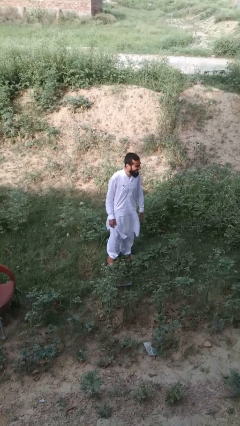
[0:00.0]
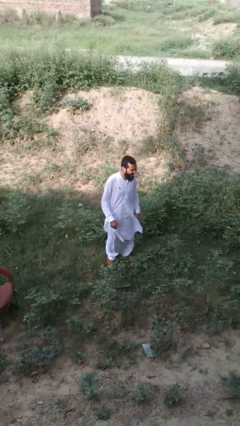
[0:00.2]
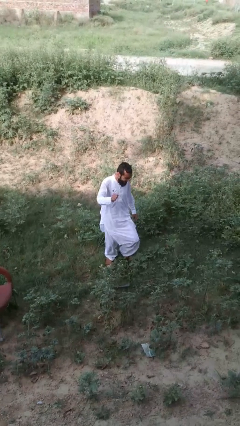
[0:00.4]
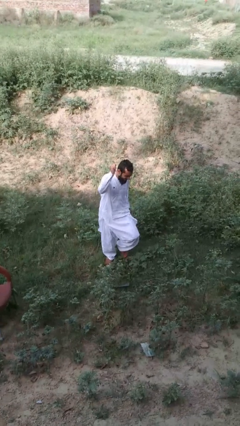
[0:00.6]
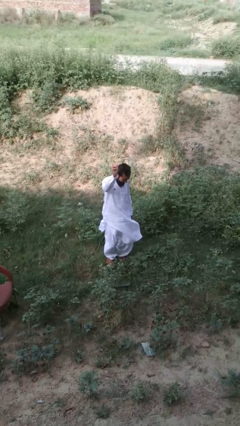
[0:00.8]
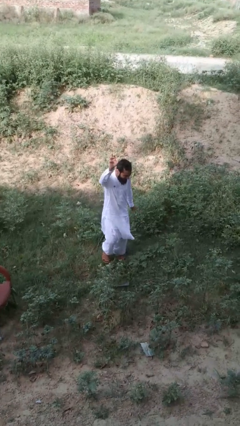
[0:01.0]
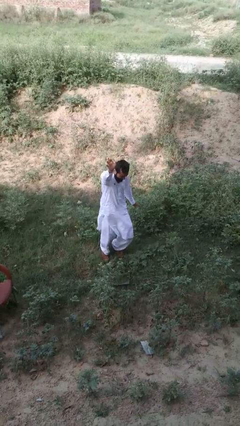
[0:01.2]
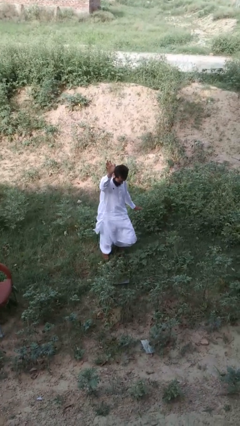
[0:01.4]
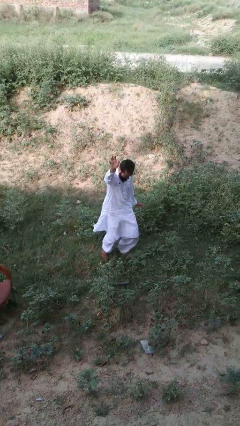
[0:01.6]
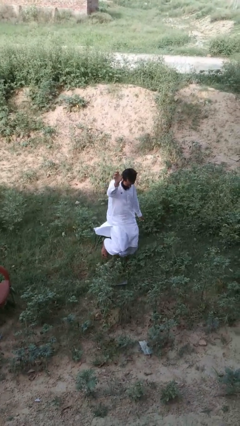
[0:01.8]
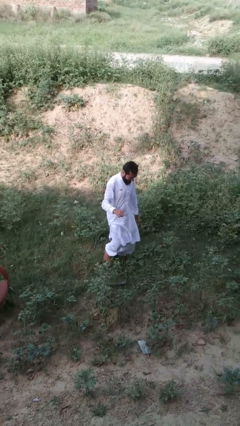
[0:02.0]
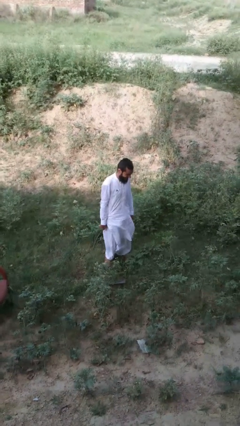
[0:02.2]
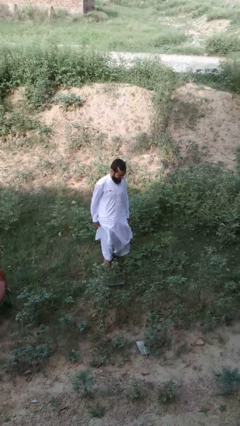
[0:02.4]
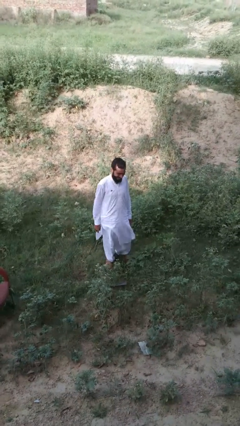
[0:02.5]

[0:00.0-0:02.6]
person dances in place

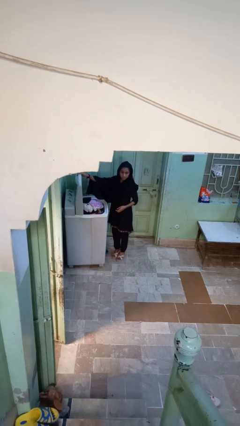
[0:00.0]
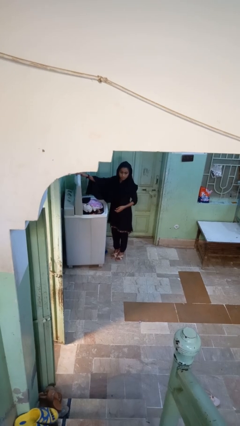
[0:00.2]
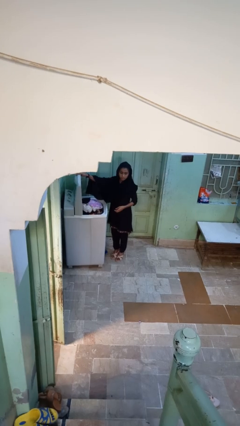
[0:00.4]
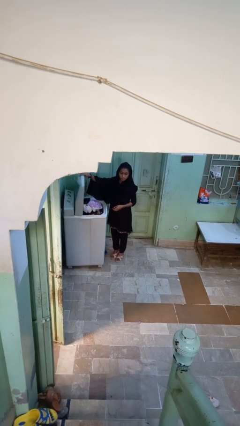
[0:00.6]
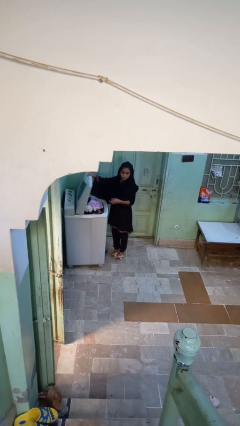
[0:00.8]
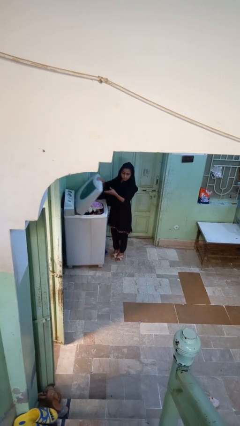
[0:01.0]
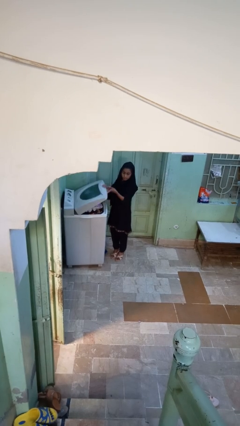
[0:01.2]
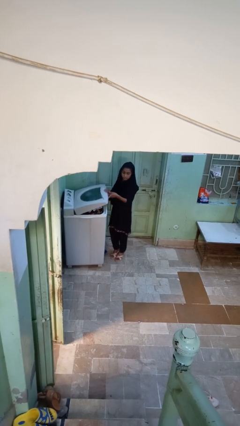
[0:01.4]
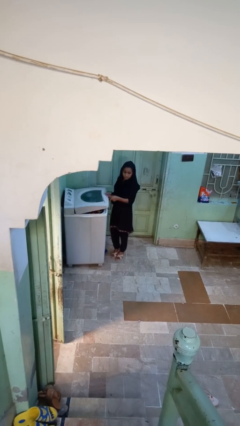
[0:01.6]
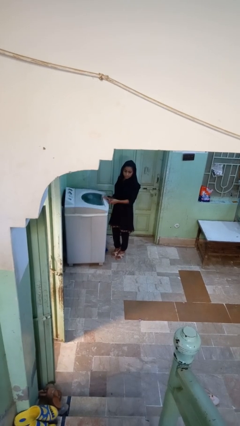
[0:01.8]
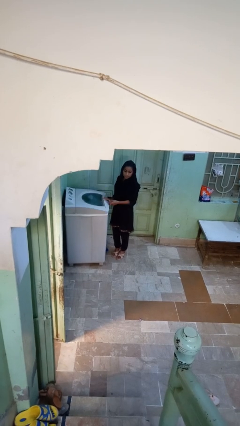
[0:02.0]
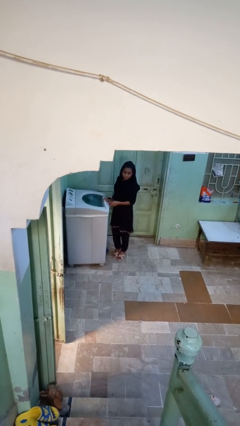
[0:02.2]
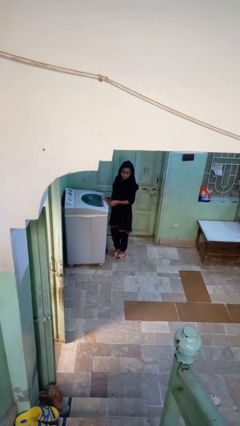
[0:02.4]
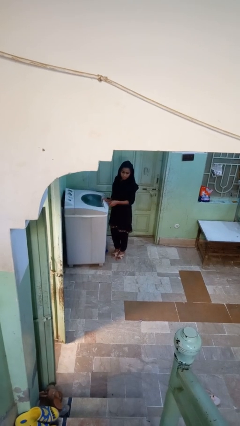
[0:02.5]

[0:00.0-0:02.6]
person closes clothes washer

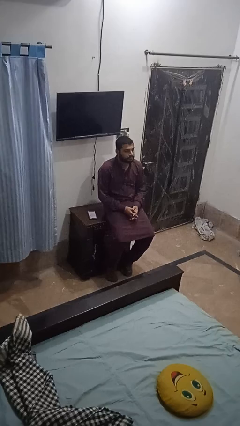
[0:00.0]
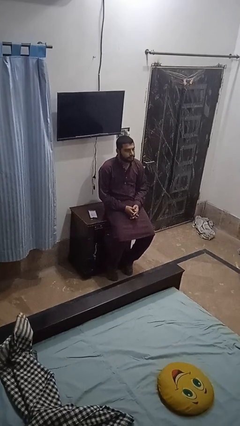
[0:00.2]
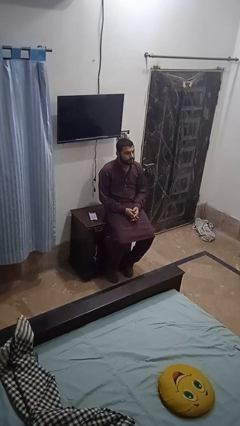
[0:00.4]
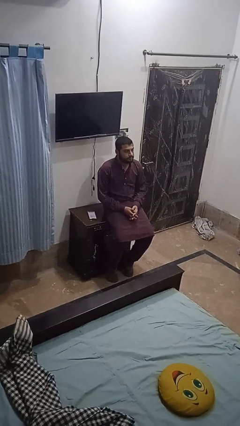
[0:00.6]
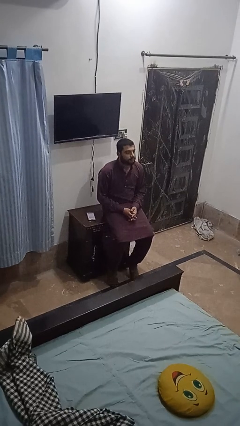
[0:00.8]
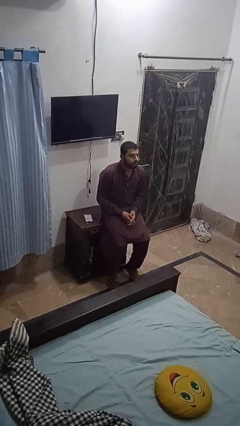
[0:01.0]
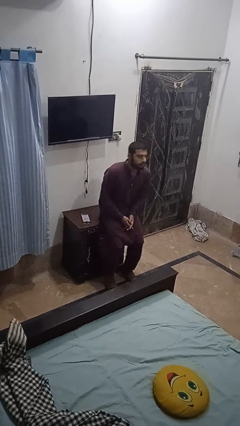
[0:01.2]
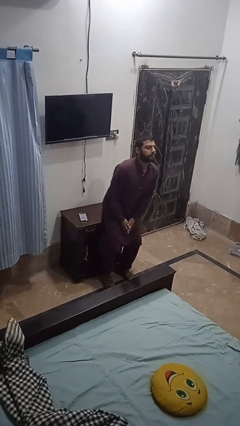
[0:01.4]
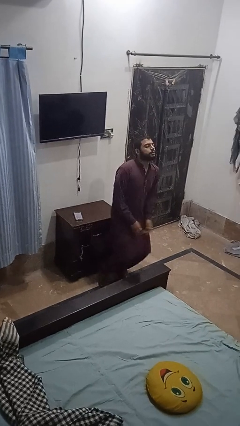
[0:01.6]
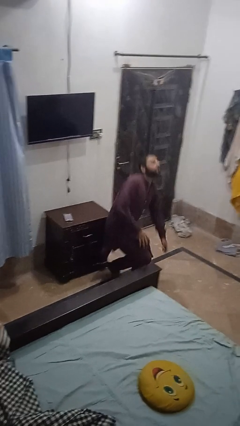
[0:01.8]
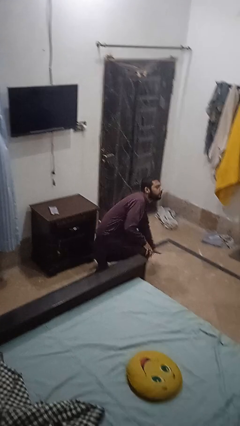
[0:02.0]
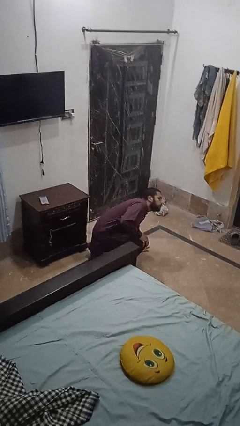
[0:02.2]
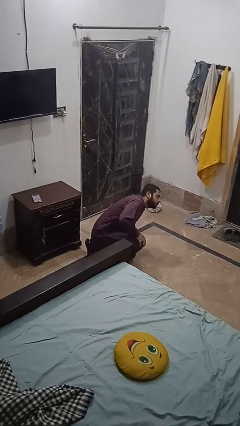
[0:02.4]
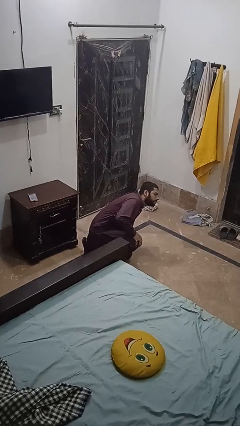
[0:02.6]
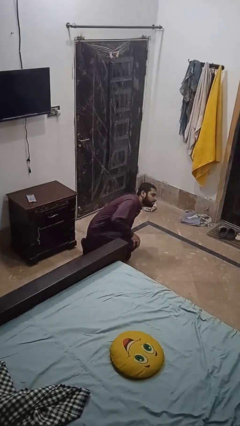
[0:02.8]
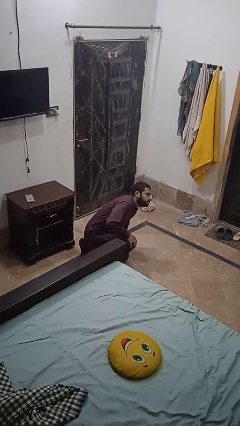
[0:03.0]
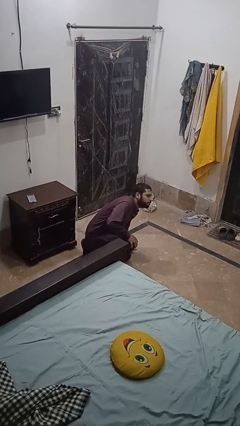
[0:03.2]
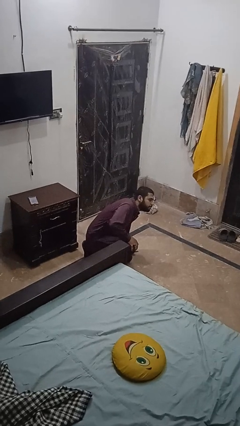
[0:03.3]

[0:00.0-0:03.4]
person falls from chair

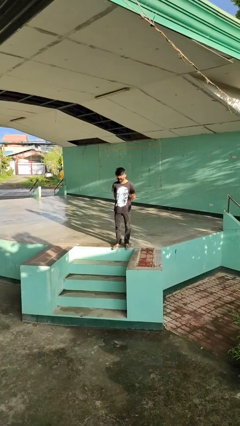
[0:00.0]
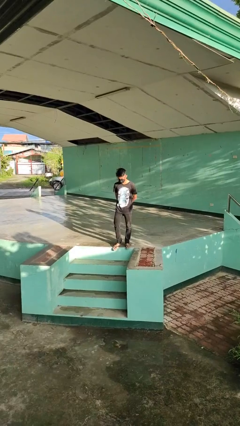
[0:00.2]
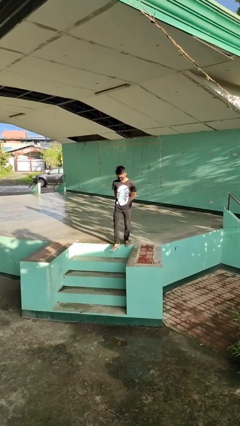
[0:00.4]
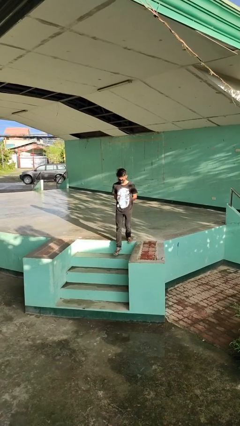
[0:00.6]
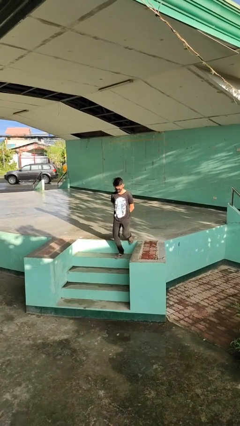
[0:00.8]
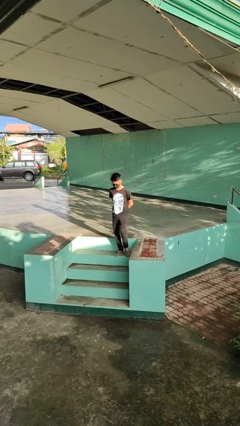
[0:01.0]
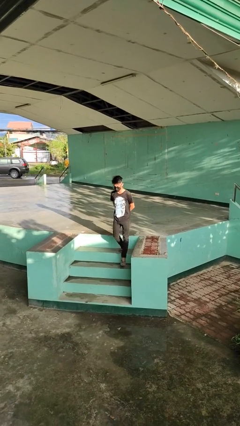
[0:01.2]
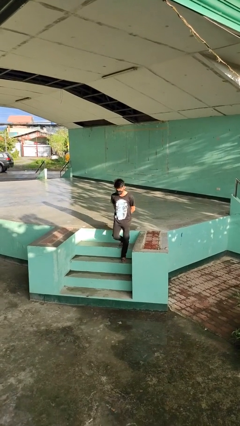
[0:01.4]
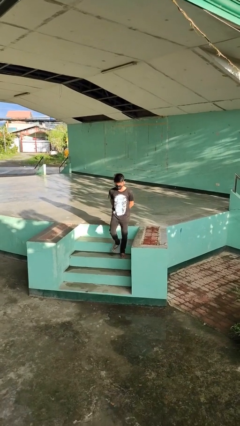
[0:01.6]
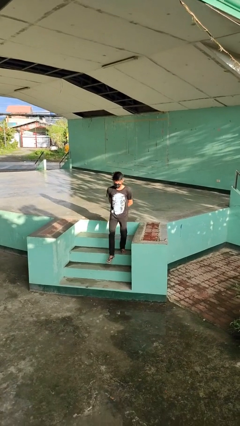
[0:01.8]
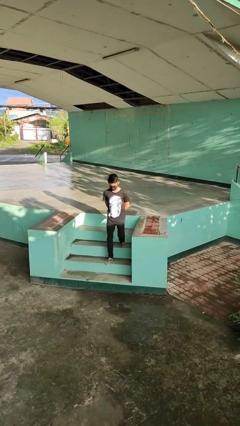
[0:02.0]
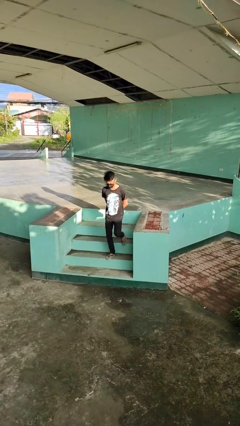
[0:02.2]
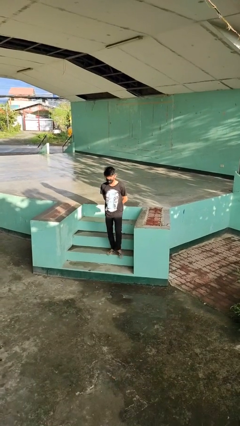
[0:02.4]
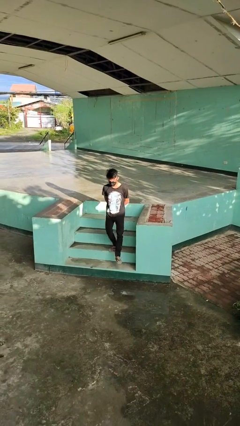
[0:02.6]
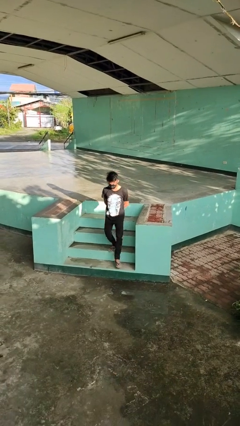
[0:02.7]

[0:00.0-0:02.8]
person climbs down stairs

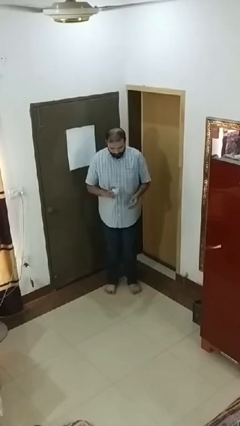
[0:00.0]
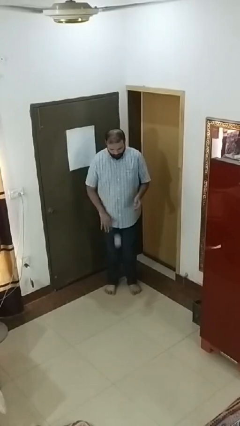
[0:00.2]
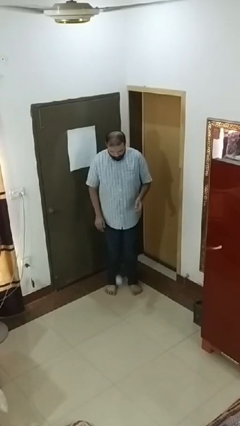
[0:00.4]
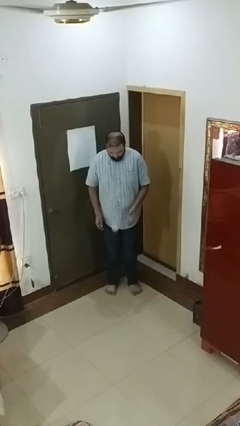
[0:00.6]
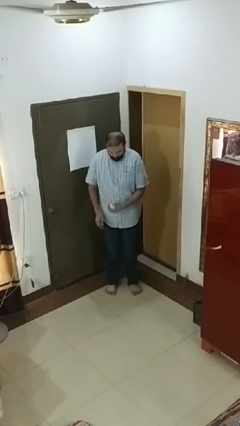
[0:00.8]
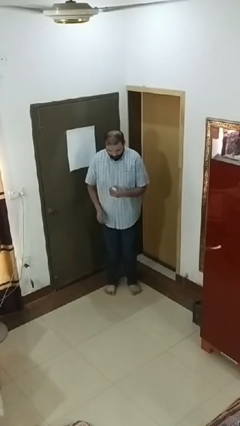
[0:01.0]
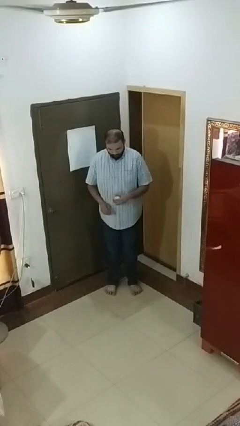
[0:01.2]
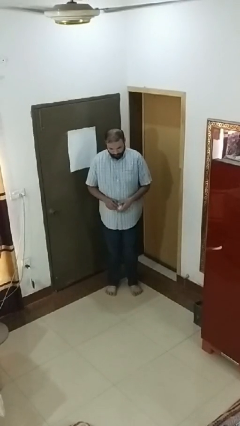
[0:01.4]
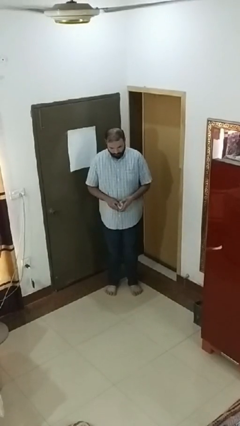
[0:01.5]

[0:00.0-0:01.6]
person bounces ball on floor

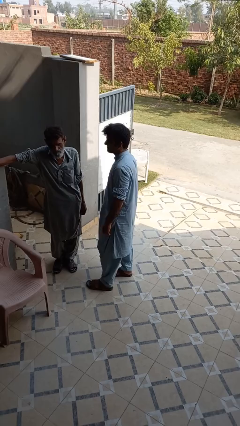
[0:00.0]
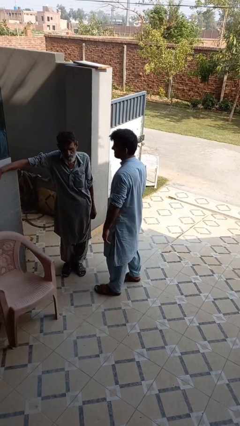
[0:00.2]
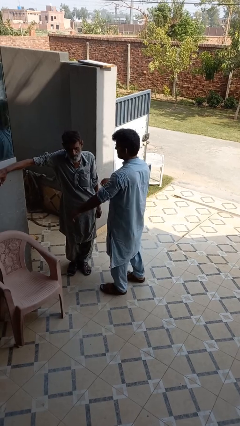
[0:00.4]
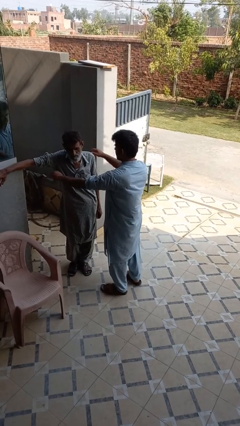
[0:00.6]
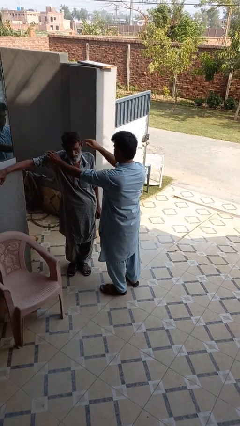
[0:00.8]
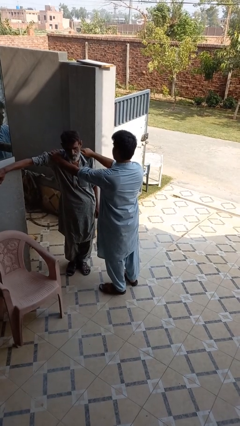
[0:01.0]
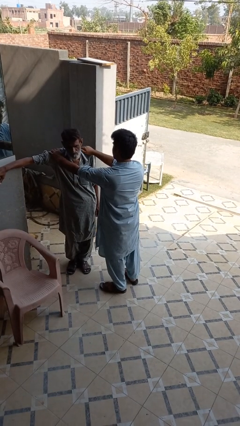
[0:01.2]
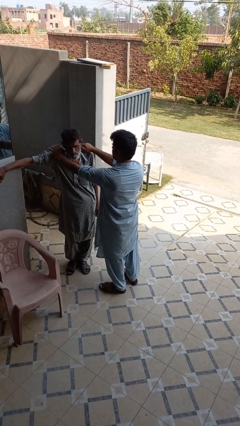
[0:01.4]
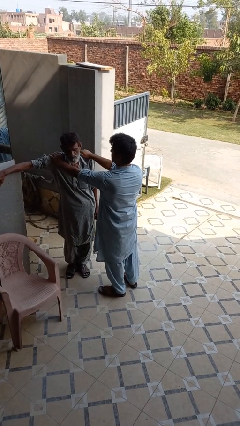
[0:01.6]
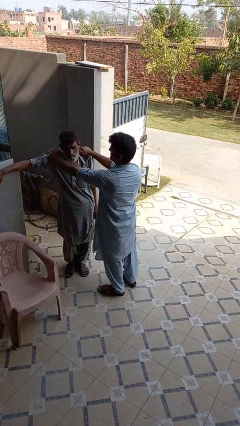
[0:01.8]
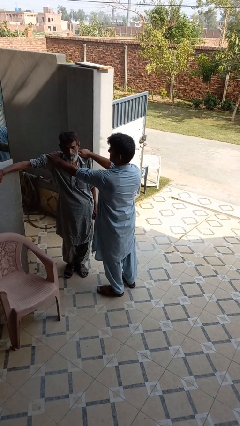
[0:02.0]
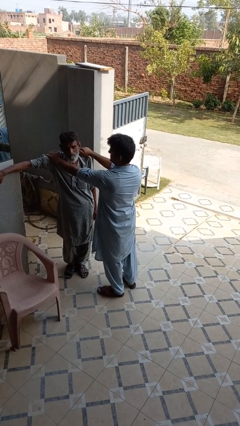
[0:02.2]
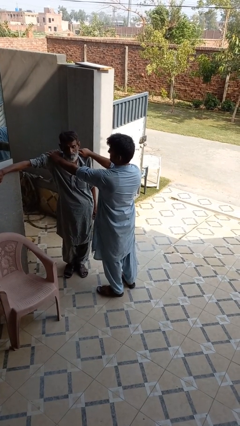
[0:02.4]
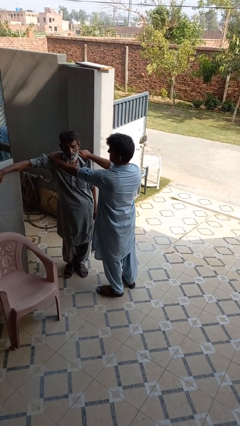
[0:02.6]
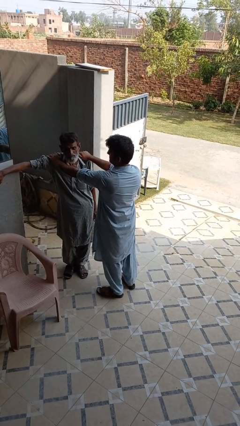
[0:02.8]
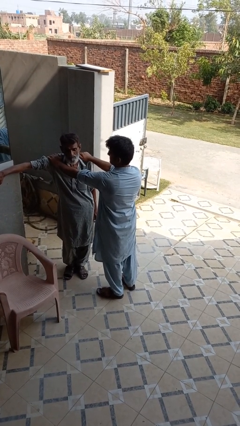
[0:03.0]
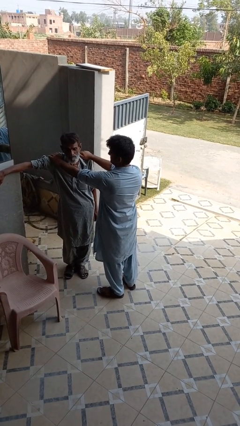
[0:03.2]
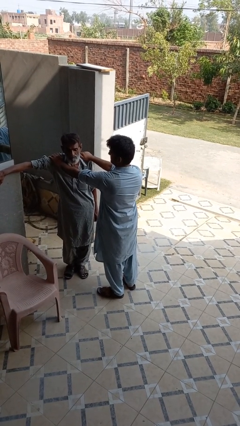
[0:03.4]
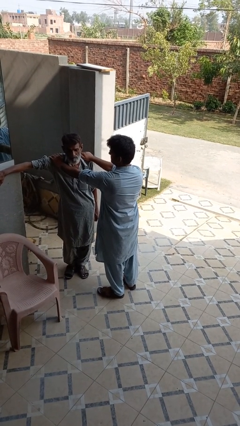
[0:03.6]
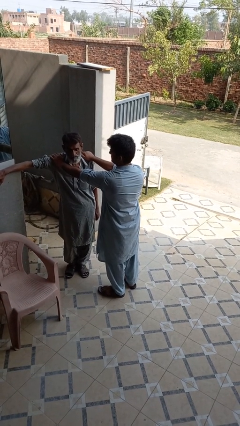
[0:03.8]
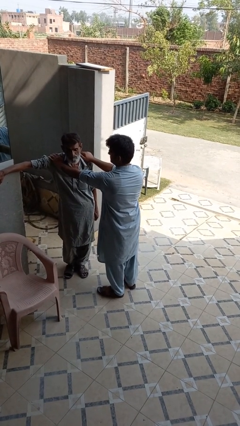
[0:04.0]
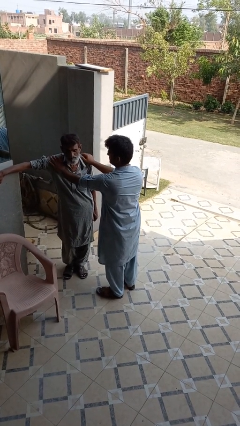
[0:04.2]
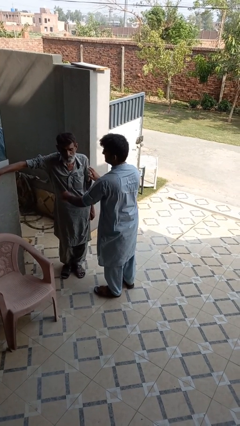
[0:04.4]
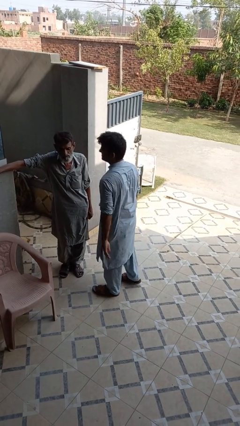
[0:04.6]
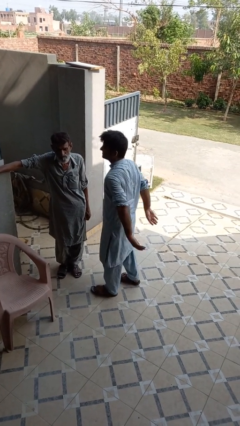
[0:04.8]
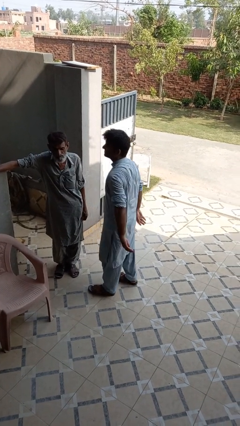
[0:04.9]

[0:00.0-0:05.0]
person pounds shoulders of person
